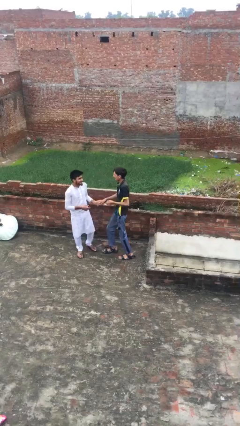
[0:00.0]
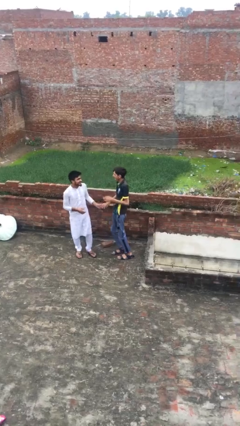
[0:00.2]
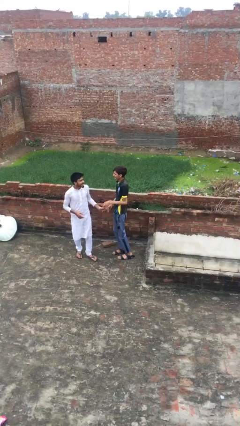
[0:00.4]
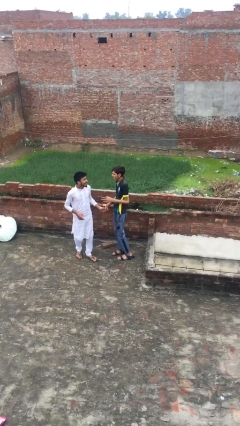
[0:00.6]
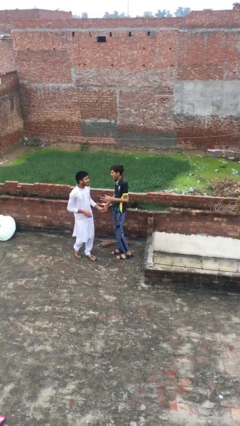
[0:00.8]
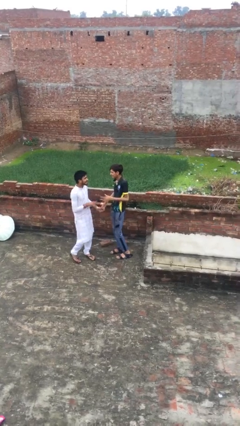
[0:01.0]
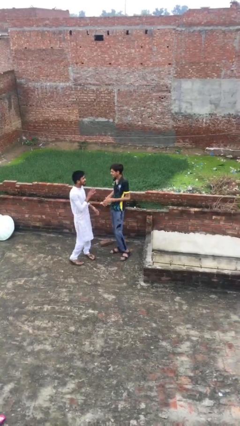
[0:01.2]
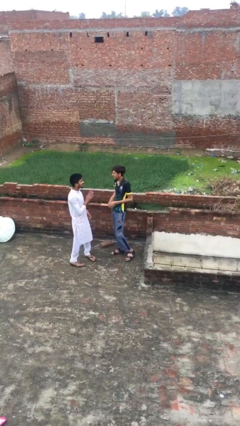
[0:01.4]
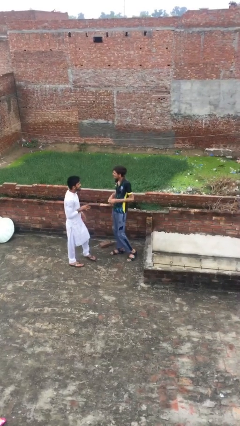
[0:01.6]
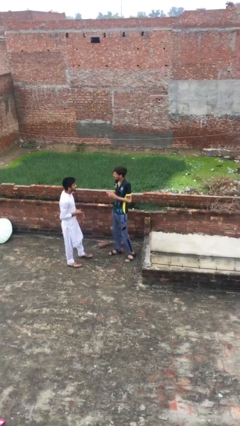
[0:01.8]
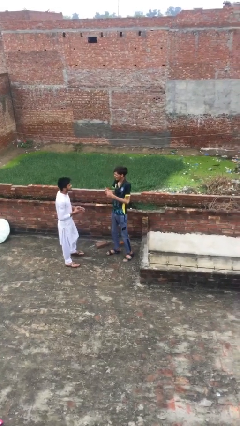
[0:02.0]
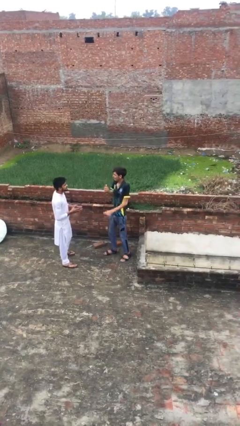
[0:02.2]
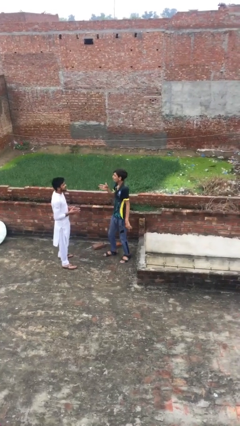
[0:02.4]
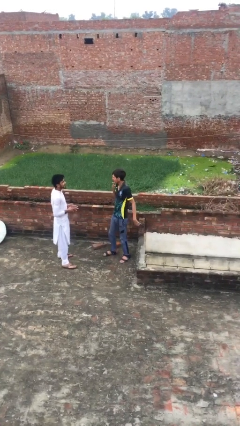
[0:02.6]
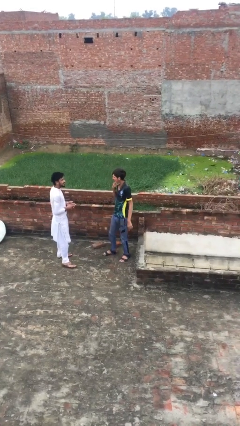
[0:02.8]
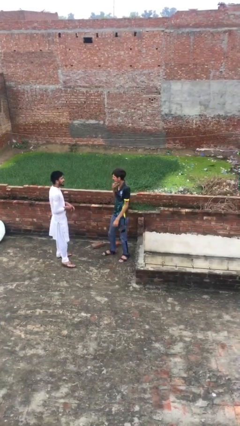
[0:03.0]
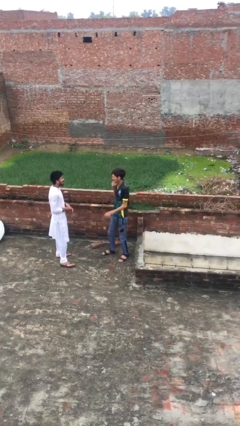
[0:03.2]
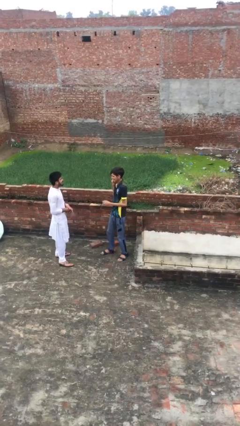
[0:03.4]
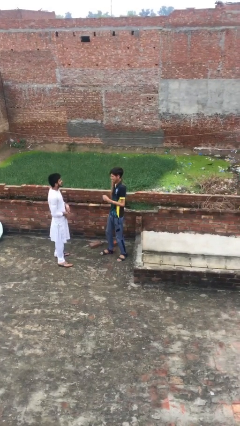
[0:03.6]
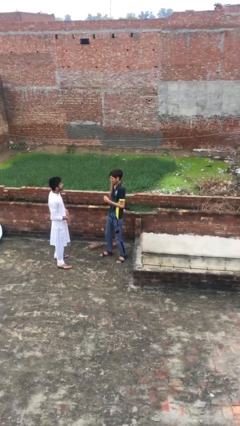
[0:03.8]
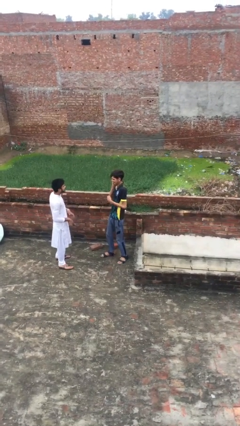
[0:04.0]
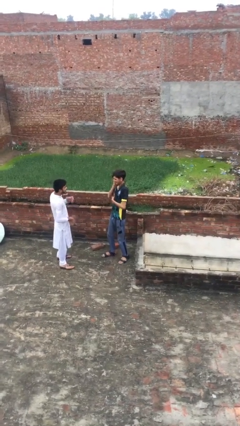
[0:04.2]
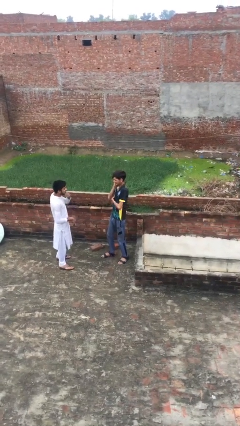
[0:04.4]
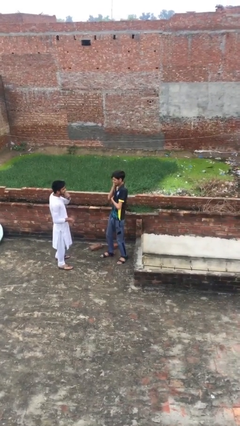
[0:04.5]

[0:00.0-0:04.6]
person talks to person

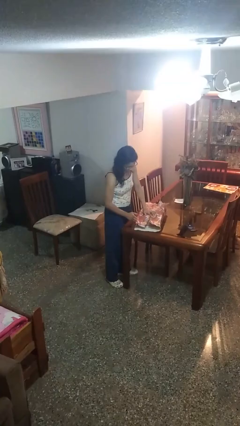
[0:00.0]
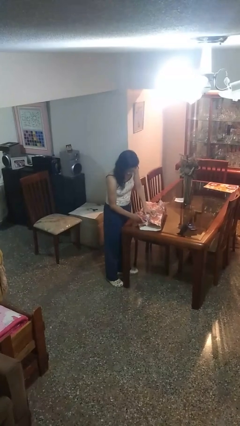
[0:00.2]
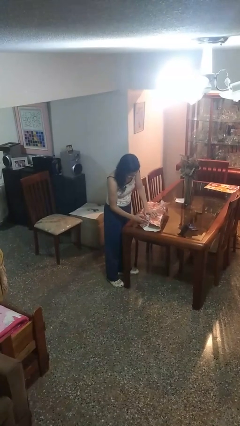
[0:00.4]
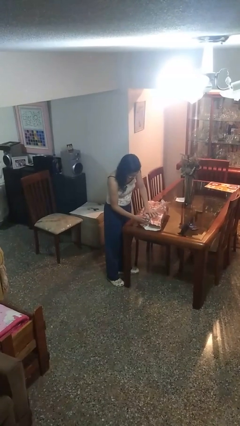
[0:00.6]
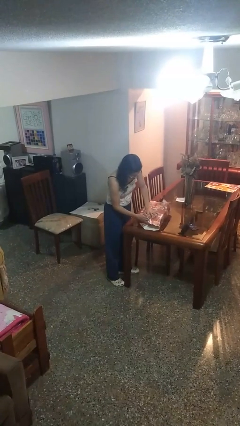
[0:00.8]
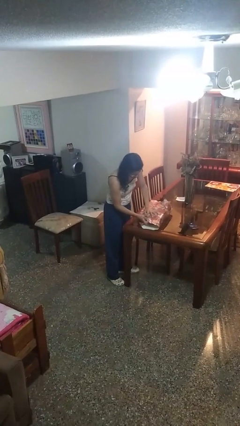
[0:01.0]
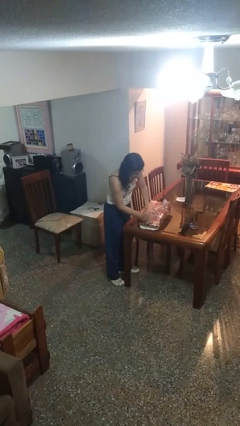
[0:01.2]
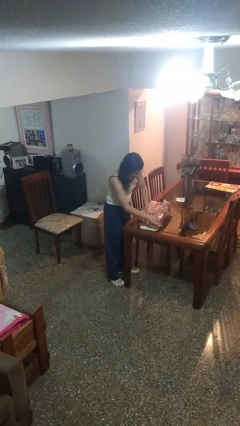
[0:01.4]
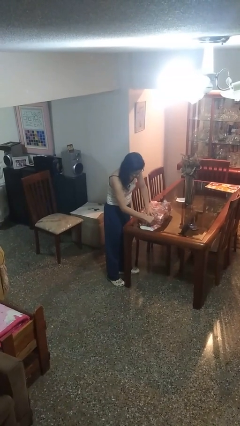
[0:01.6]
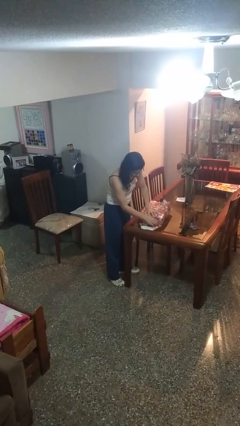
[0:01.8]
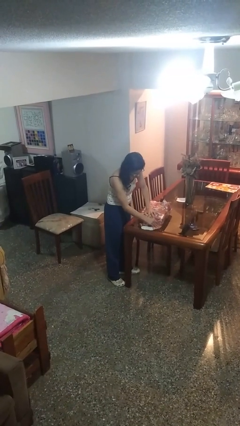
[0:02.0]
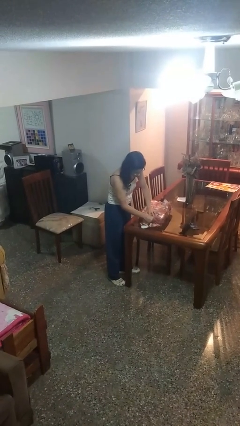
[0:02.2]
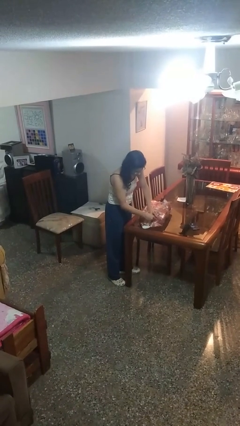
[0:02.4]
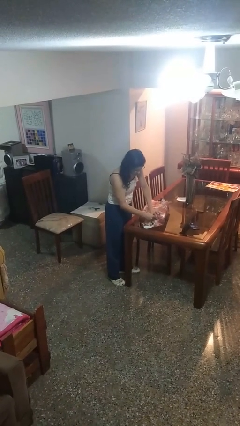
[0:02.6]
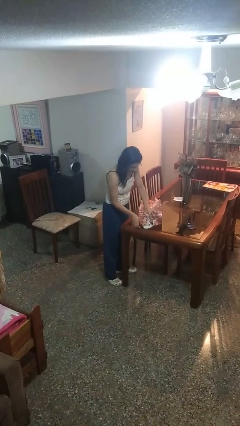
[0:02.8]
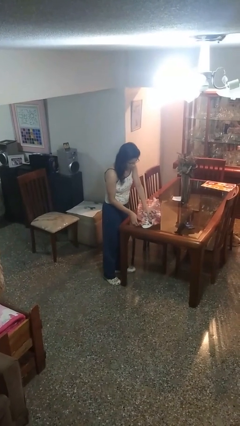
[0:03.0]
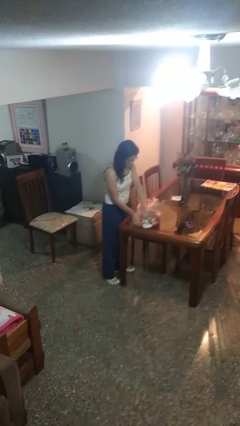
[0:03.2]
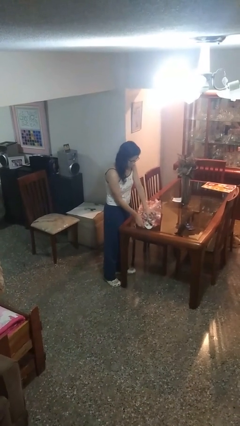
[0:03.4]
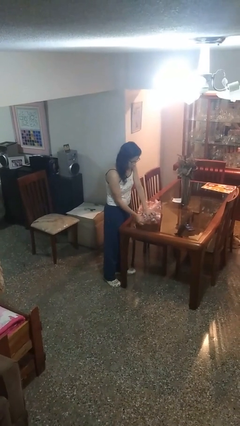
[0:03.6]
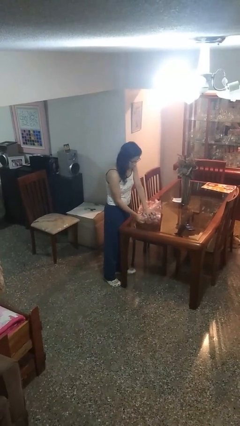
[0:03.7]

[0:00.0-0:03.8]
person wraps box

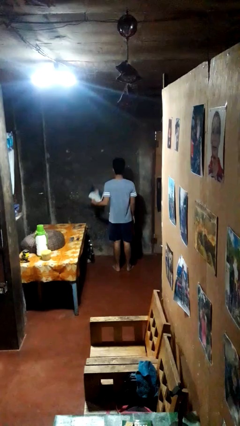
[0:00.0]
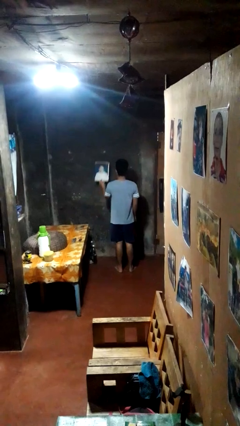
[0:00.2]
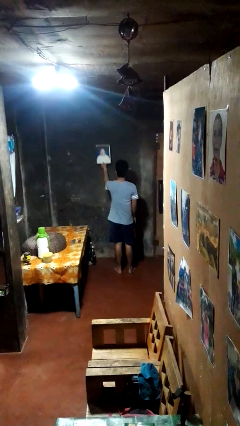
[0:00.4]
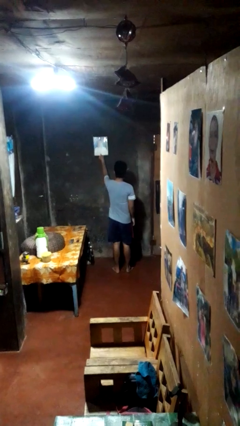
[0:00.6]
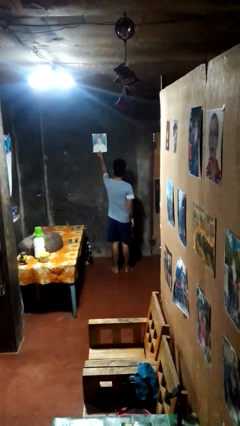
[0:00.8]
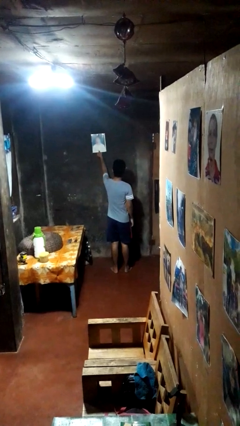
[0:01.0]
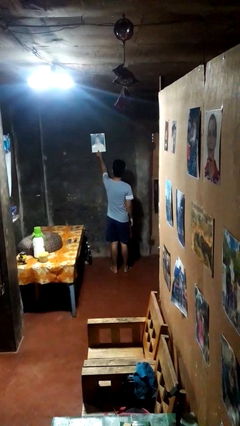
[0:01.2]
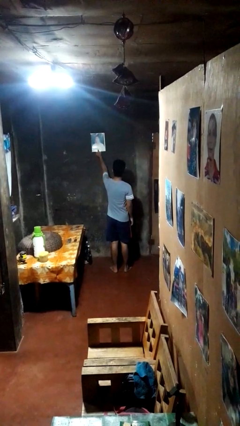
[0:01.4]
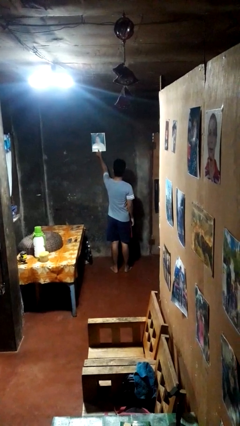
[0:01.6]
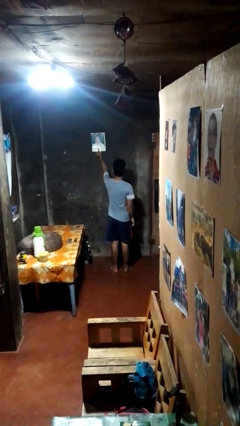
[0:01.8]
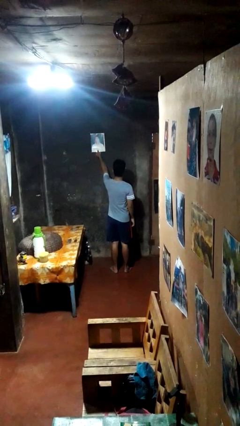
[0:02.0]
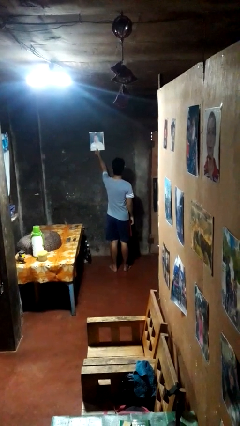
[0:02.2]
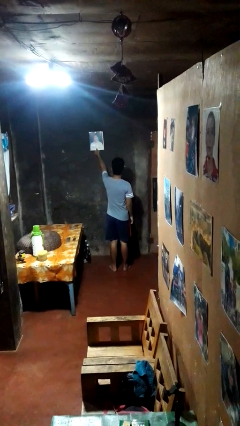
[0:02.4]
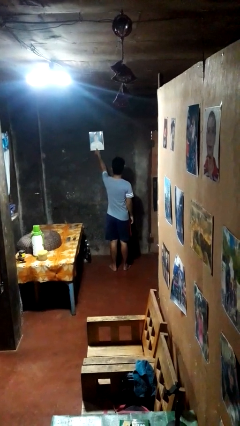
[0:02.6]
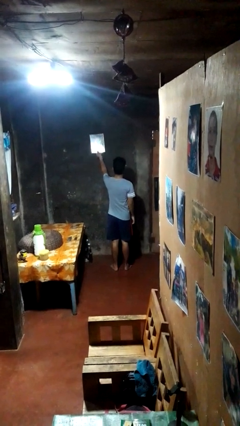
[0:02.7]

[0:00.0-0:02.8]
person puts up picture frame

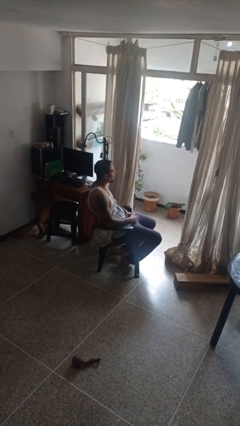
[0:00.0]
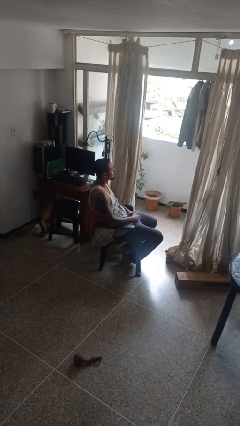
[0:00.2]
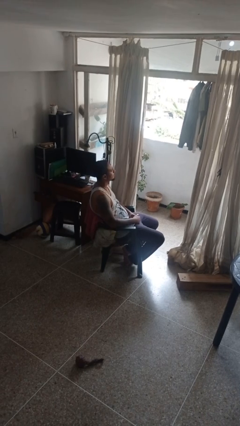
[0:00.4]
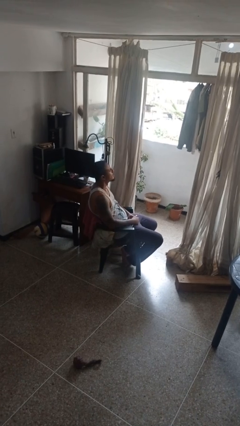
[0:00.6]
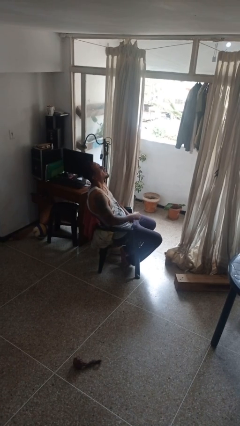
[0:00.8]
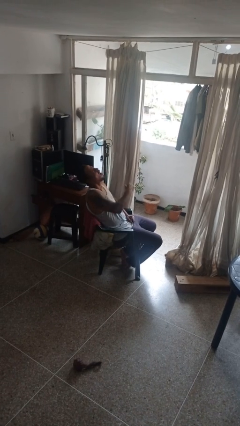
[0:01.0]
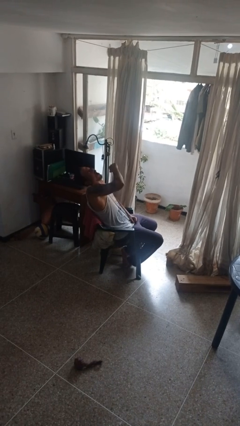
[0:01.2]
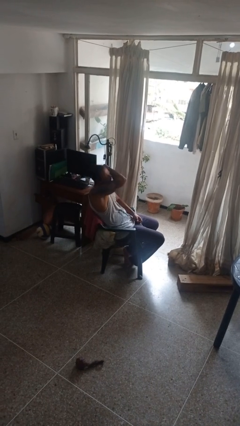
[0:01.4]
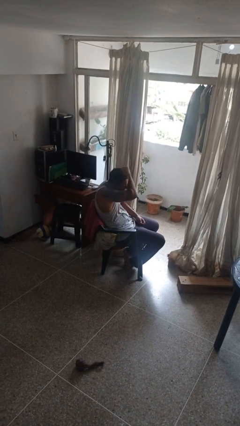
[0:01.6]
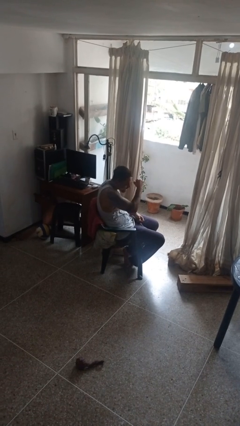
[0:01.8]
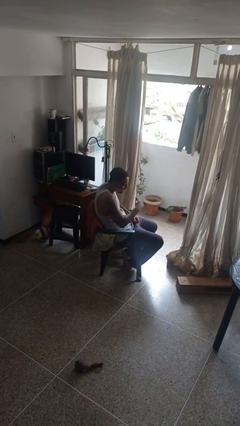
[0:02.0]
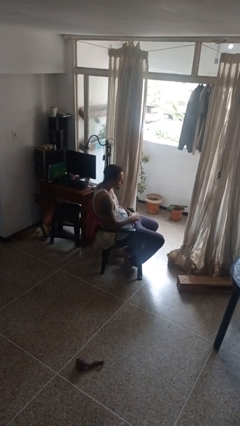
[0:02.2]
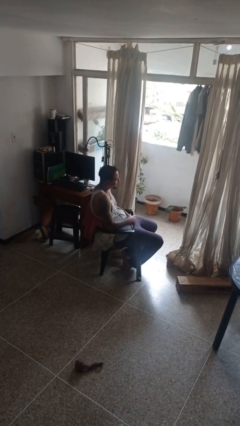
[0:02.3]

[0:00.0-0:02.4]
person sneezes into arm

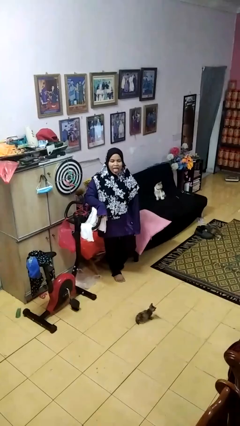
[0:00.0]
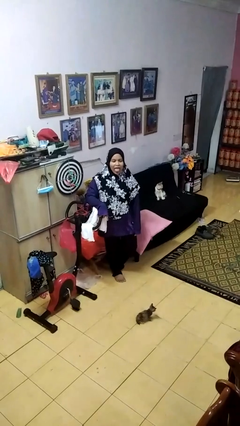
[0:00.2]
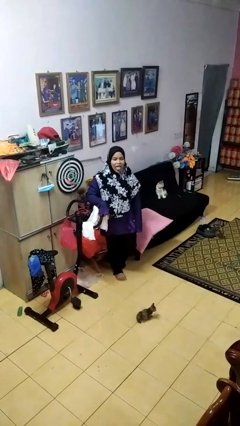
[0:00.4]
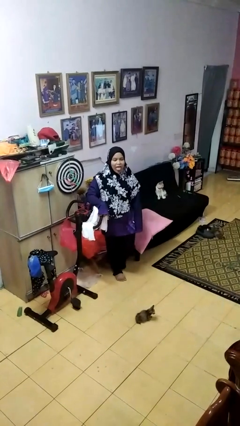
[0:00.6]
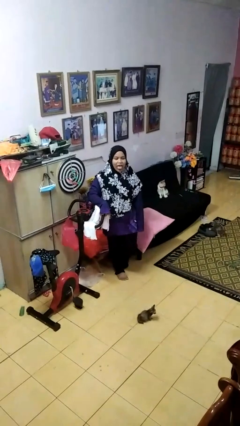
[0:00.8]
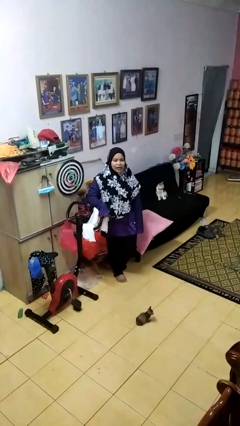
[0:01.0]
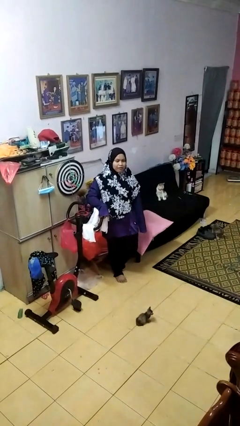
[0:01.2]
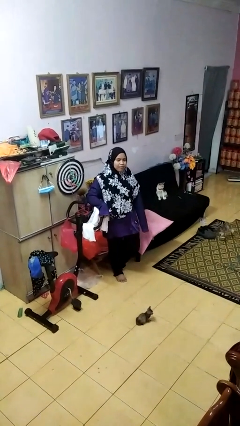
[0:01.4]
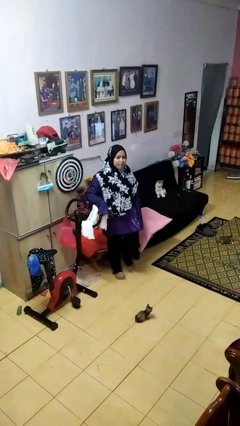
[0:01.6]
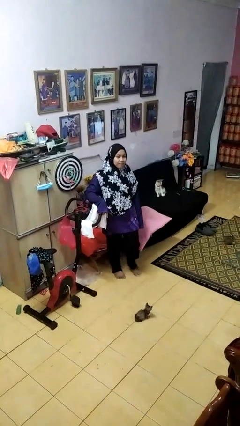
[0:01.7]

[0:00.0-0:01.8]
person sticks out tongue

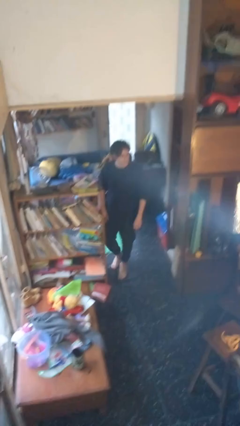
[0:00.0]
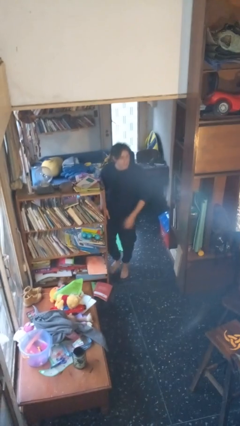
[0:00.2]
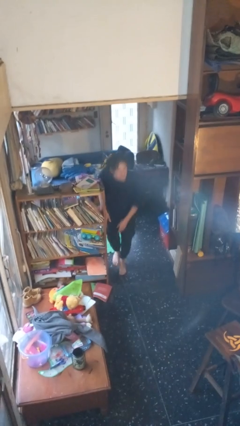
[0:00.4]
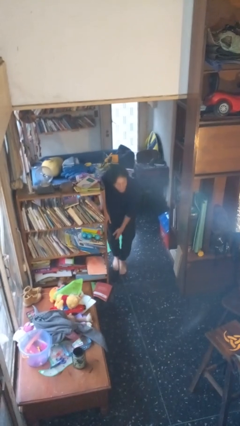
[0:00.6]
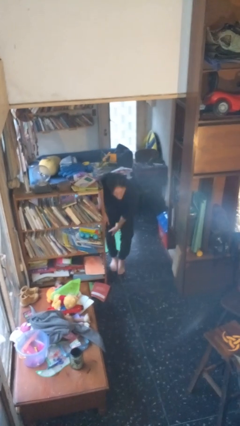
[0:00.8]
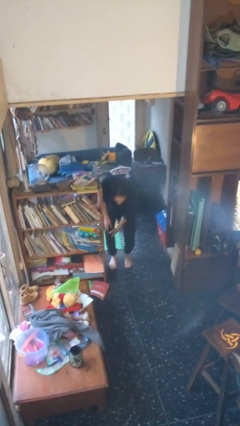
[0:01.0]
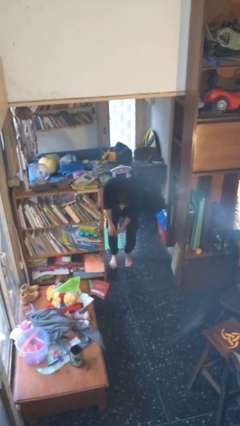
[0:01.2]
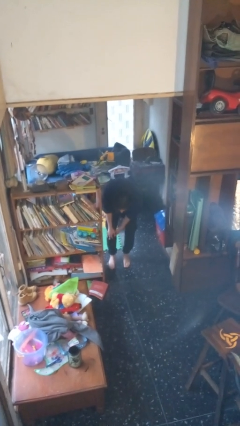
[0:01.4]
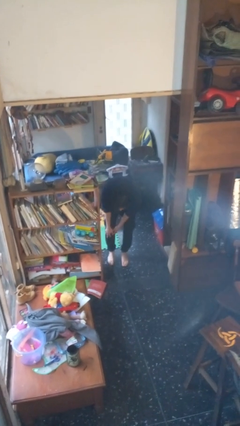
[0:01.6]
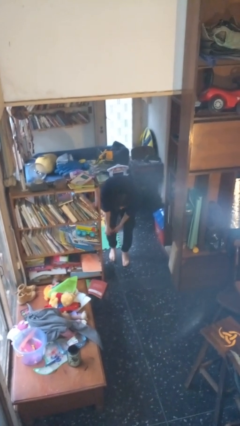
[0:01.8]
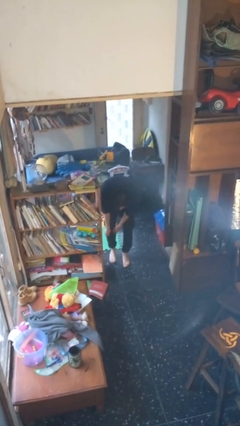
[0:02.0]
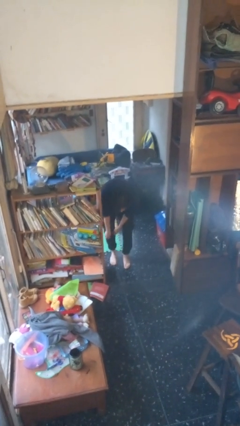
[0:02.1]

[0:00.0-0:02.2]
person stubs toe

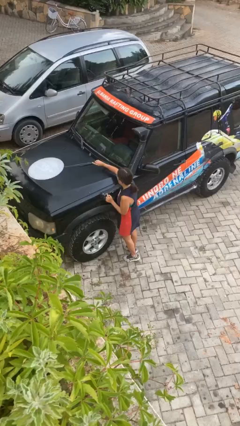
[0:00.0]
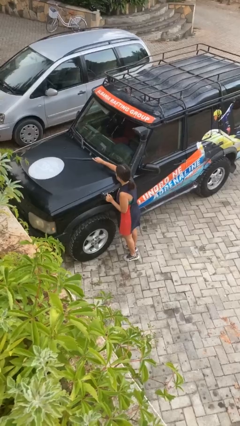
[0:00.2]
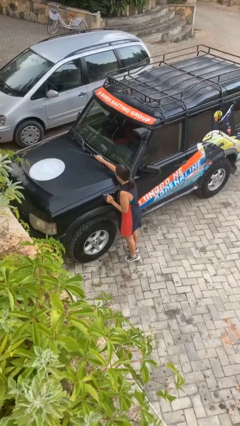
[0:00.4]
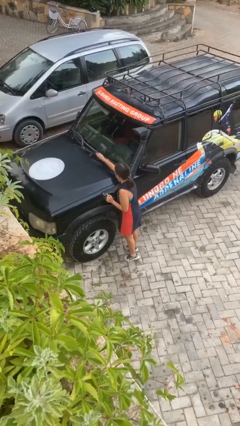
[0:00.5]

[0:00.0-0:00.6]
person flips up car wipers
